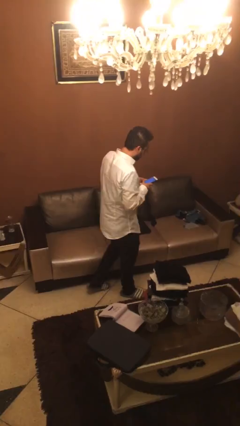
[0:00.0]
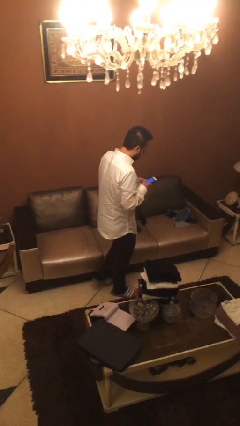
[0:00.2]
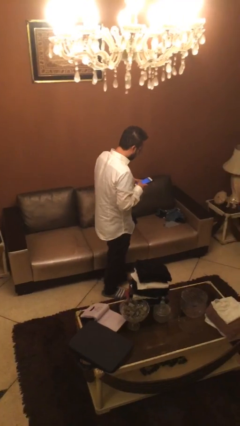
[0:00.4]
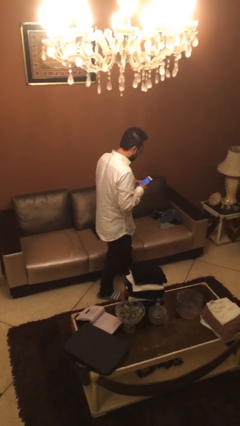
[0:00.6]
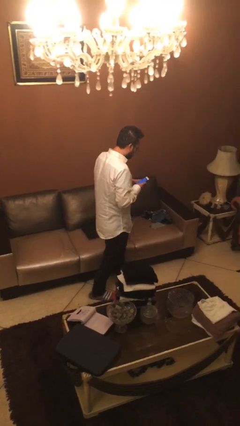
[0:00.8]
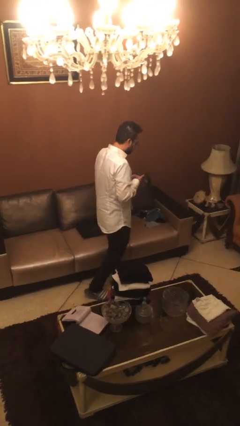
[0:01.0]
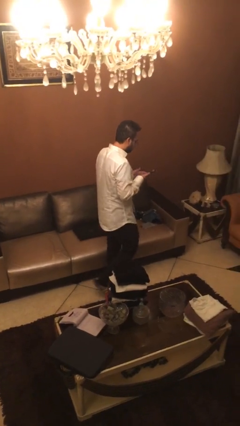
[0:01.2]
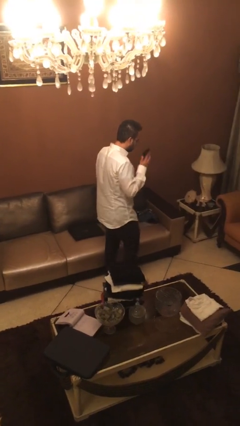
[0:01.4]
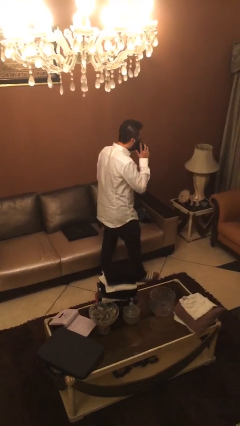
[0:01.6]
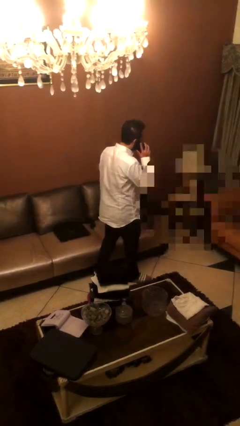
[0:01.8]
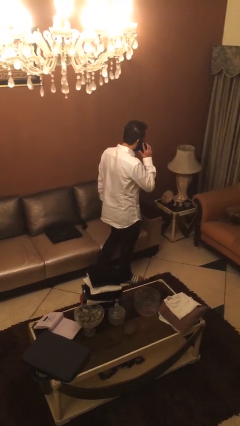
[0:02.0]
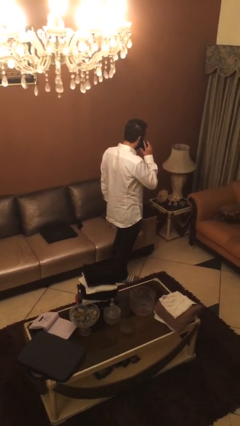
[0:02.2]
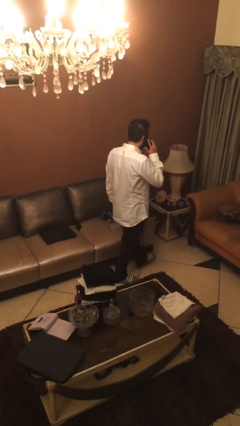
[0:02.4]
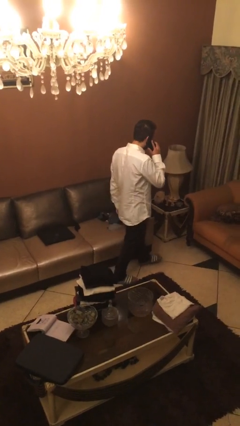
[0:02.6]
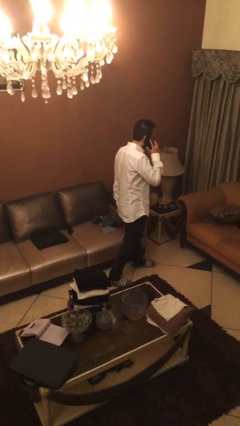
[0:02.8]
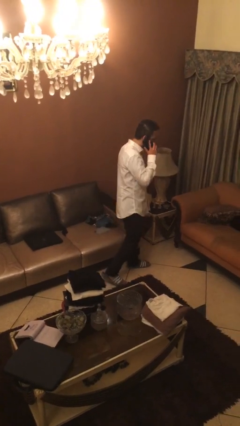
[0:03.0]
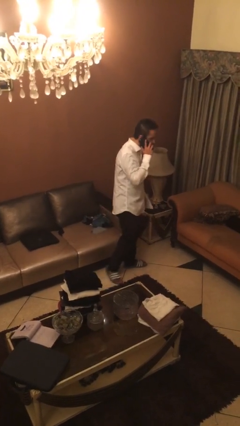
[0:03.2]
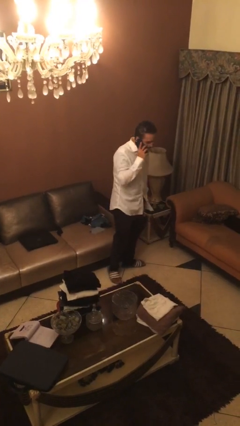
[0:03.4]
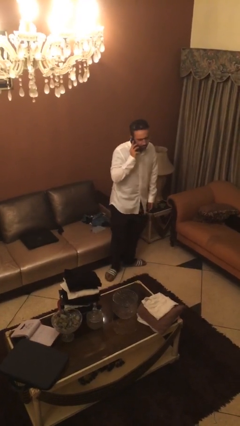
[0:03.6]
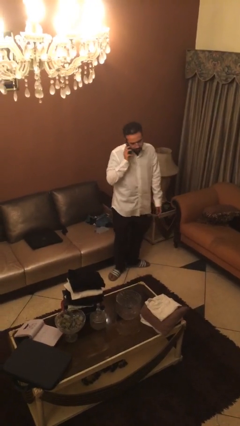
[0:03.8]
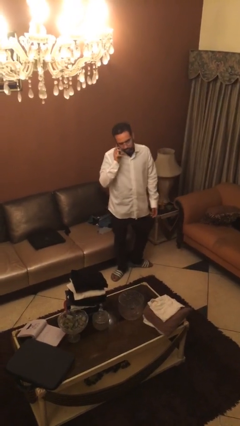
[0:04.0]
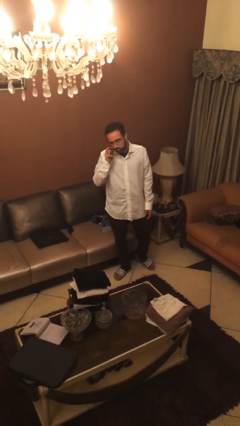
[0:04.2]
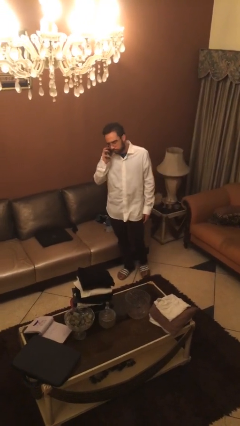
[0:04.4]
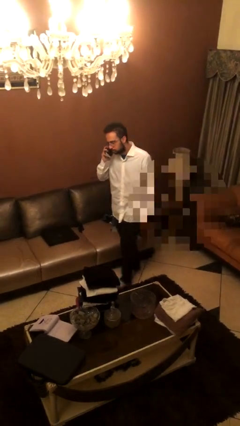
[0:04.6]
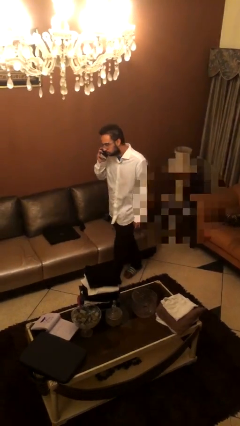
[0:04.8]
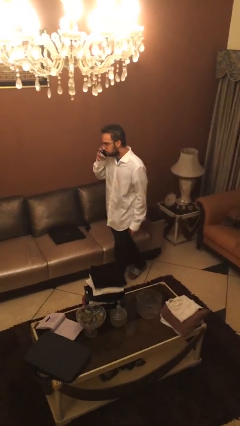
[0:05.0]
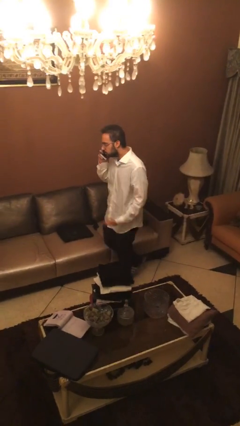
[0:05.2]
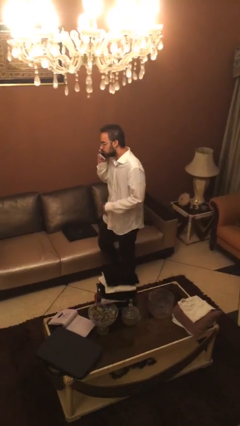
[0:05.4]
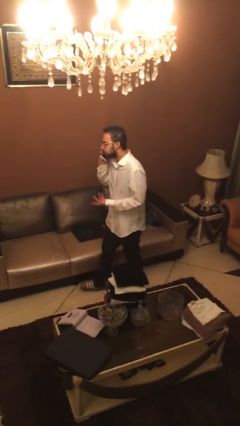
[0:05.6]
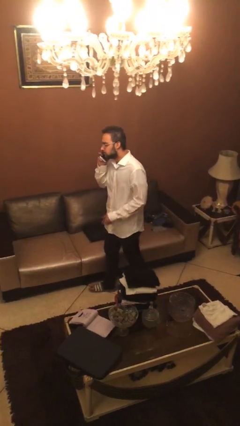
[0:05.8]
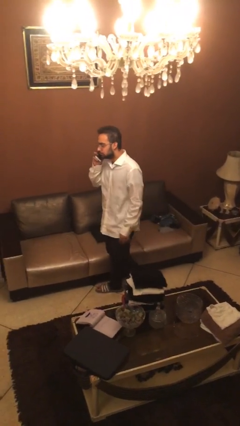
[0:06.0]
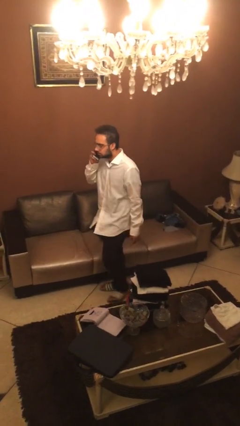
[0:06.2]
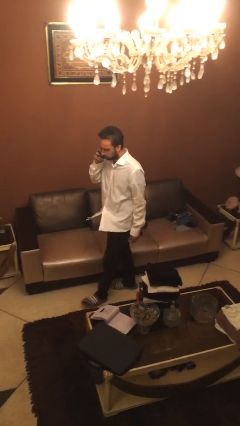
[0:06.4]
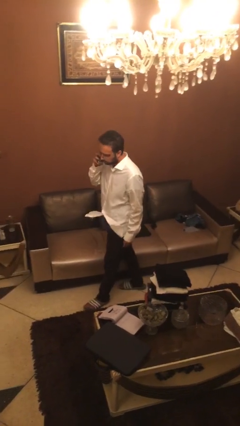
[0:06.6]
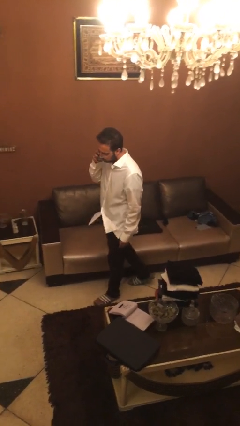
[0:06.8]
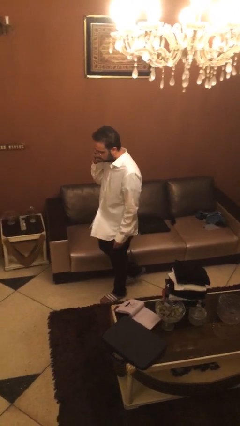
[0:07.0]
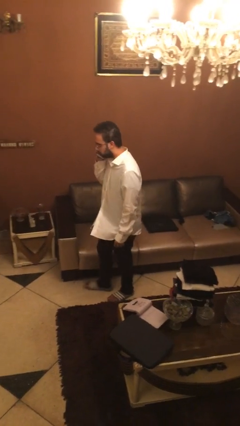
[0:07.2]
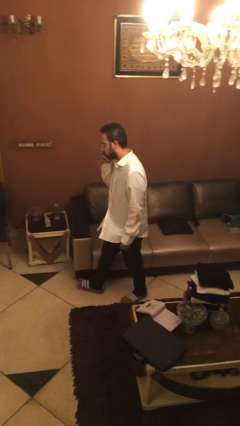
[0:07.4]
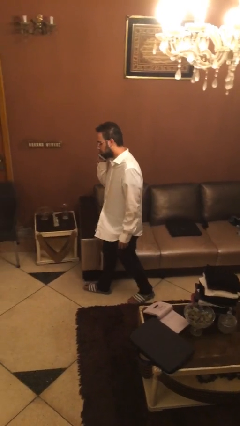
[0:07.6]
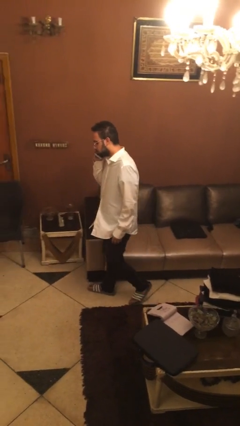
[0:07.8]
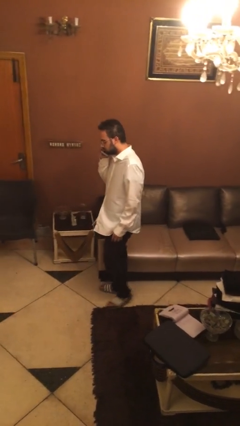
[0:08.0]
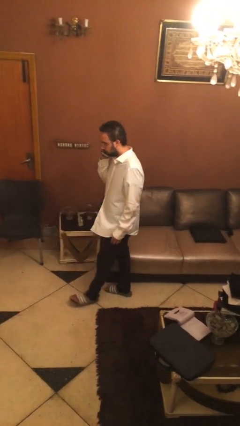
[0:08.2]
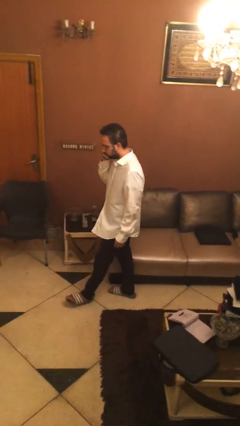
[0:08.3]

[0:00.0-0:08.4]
person talks on phone

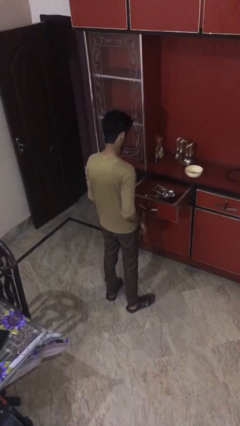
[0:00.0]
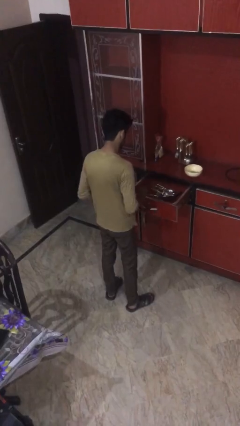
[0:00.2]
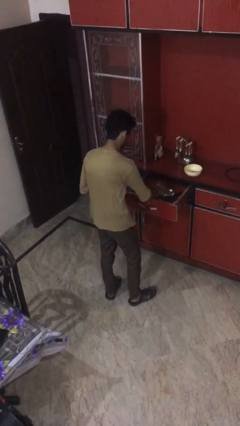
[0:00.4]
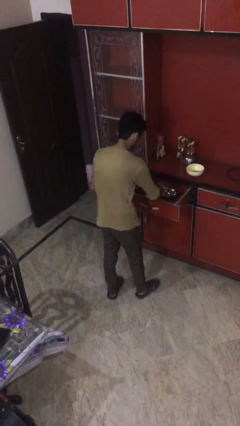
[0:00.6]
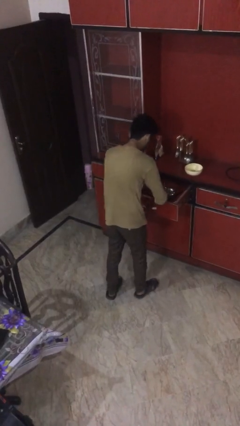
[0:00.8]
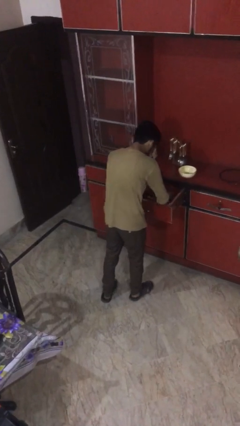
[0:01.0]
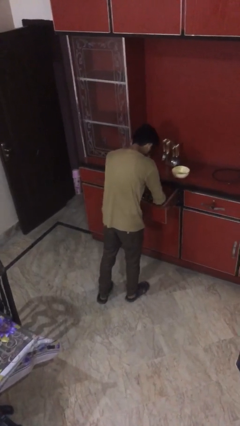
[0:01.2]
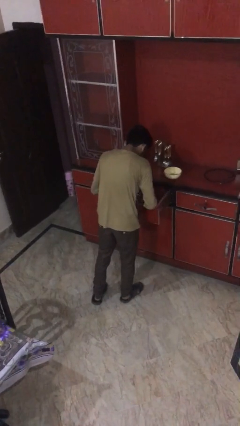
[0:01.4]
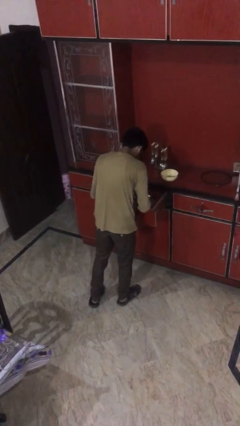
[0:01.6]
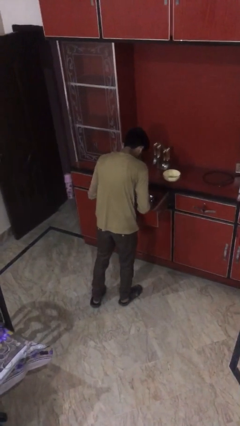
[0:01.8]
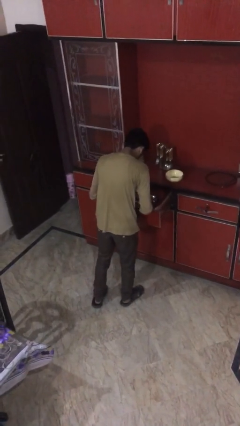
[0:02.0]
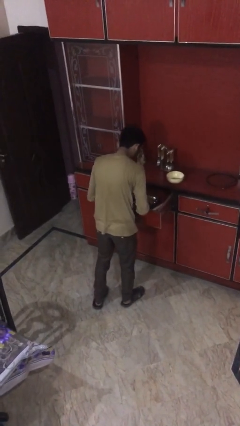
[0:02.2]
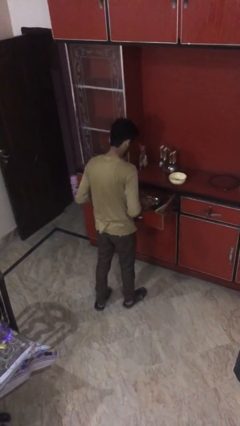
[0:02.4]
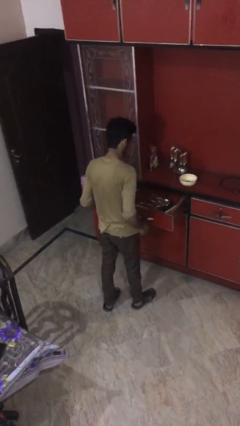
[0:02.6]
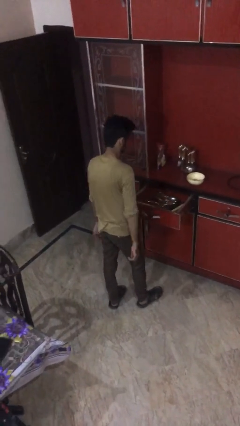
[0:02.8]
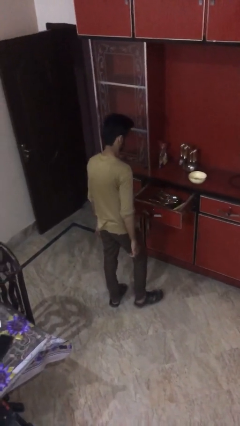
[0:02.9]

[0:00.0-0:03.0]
person searches in kitchen drawer

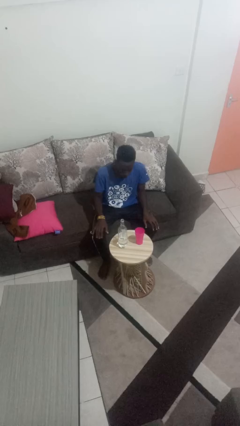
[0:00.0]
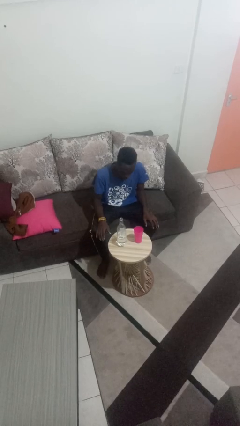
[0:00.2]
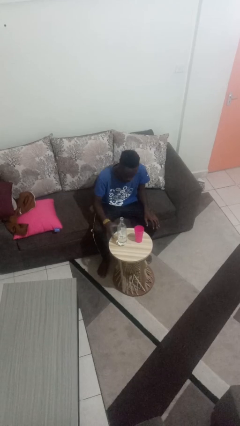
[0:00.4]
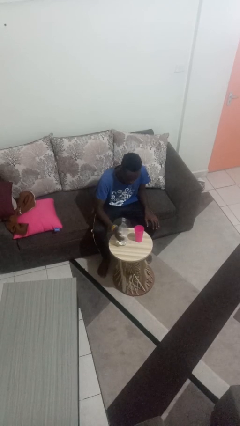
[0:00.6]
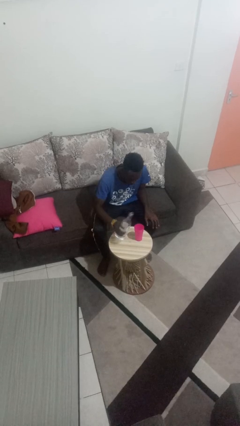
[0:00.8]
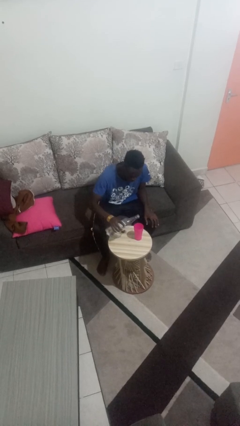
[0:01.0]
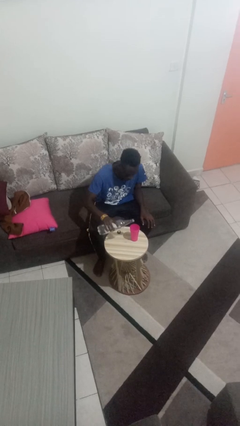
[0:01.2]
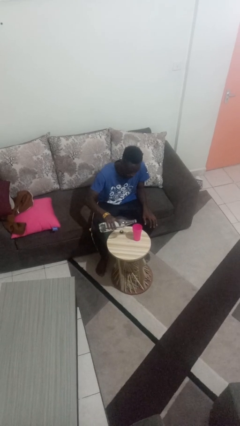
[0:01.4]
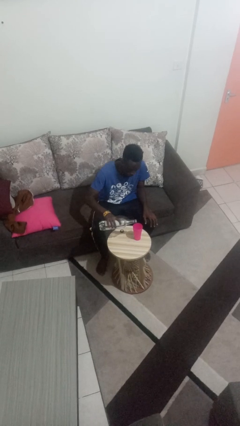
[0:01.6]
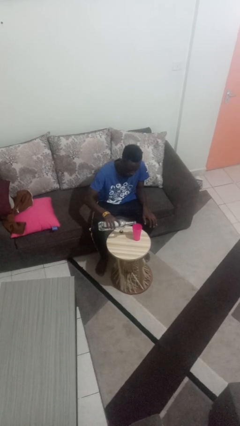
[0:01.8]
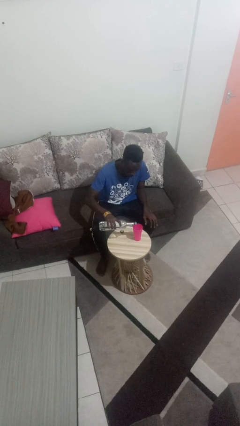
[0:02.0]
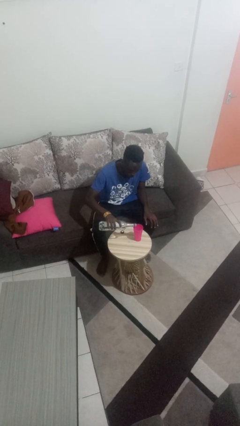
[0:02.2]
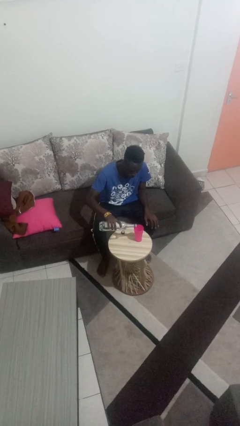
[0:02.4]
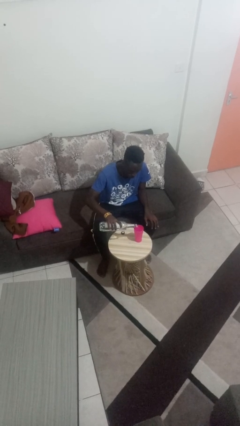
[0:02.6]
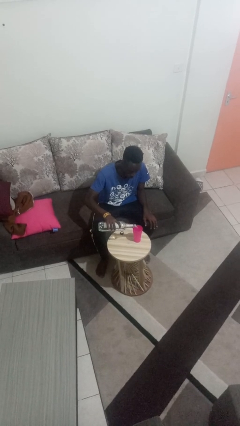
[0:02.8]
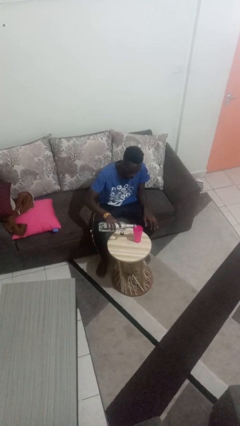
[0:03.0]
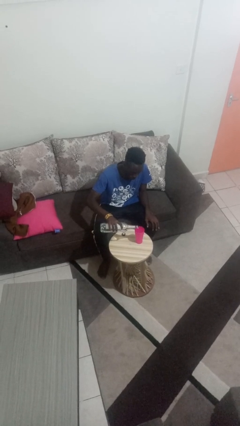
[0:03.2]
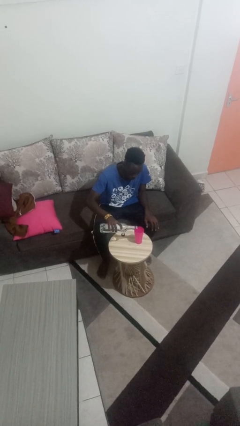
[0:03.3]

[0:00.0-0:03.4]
person pours liquid into cup

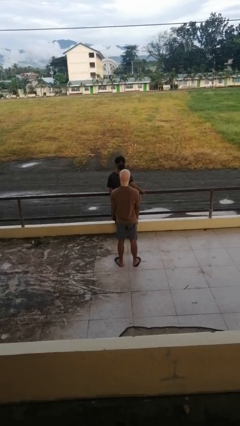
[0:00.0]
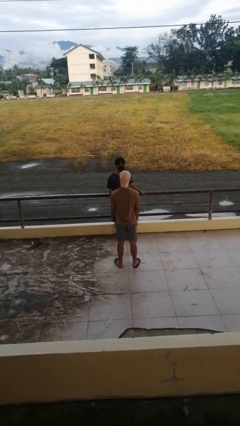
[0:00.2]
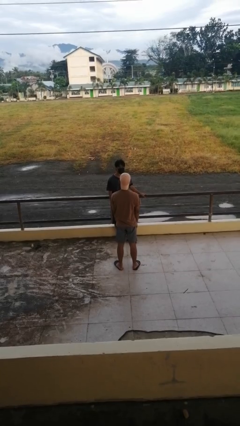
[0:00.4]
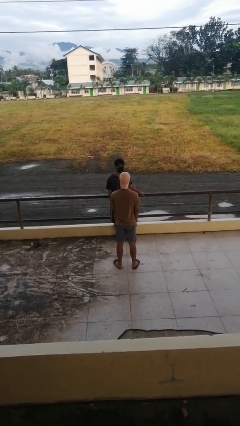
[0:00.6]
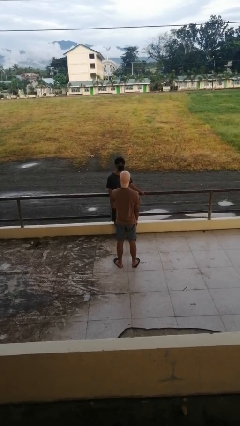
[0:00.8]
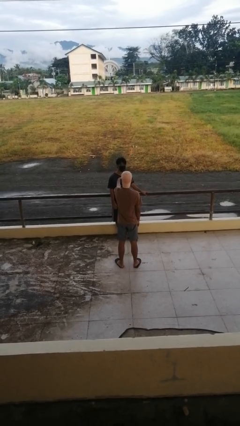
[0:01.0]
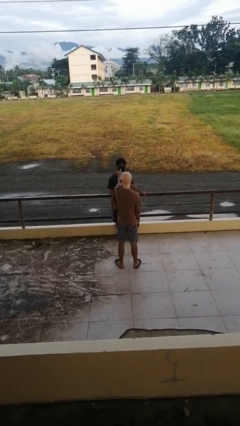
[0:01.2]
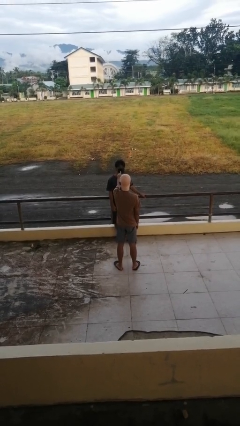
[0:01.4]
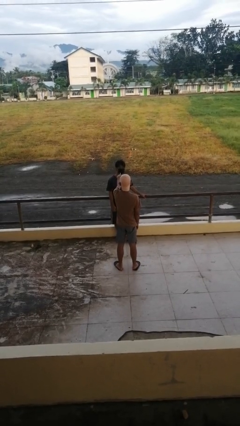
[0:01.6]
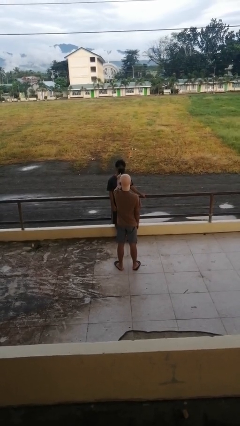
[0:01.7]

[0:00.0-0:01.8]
person points at person

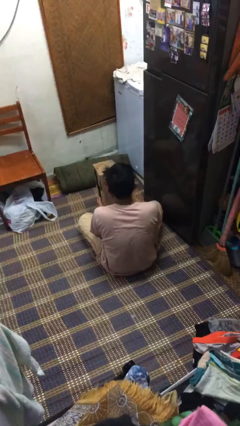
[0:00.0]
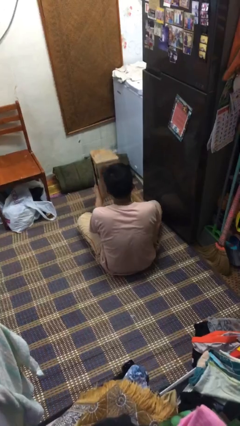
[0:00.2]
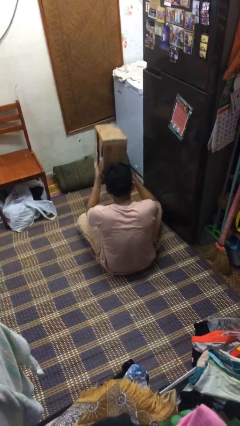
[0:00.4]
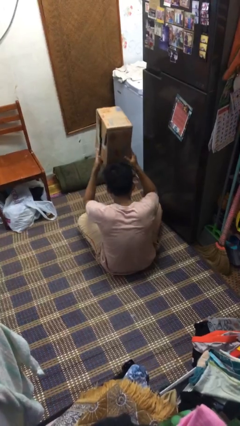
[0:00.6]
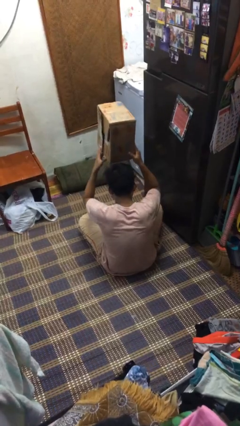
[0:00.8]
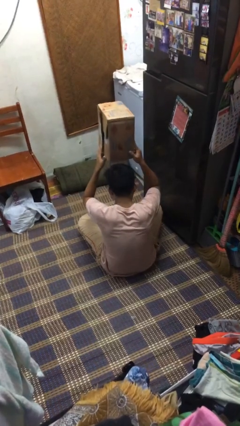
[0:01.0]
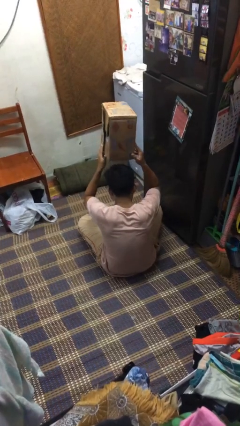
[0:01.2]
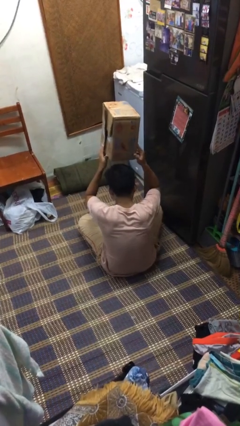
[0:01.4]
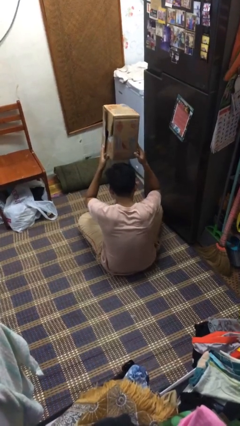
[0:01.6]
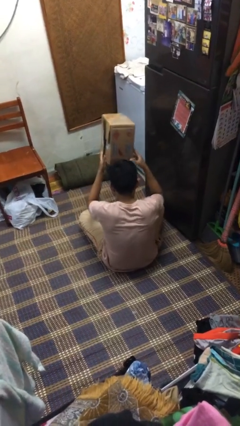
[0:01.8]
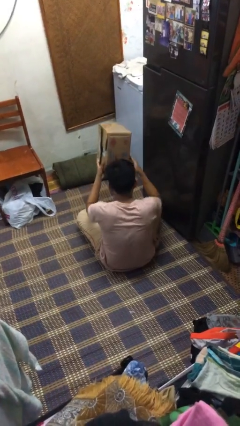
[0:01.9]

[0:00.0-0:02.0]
person holds object above head
